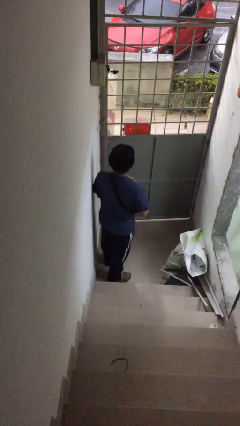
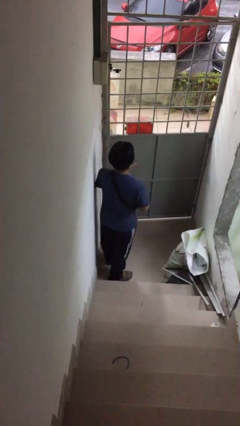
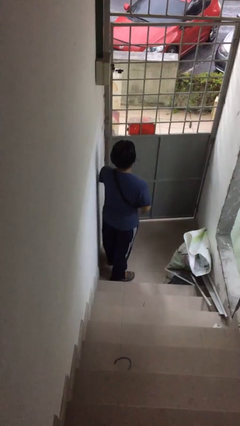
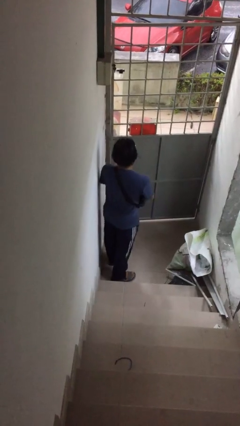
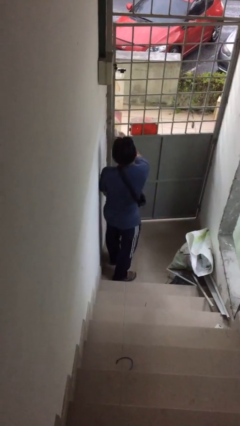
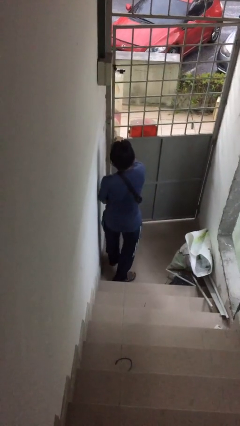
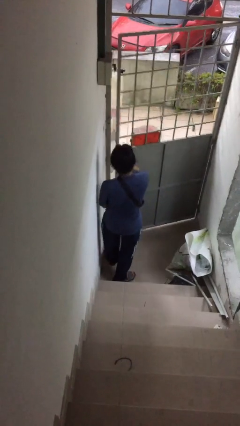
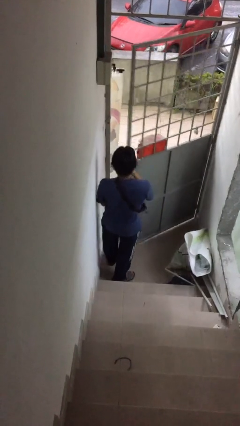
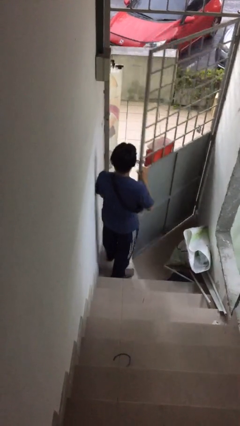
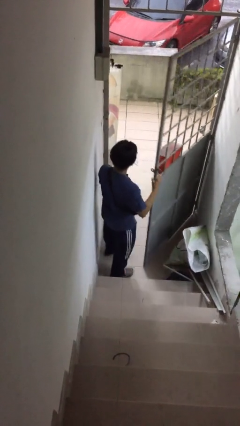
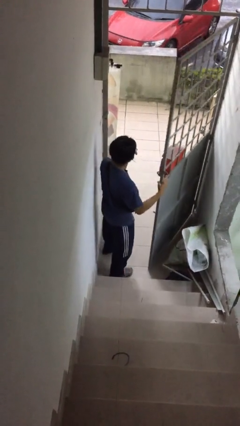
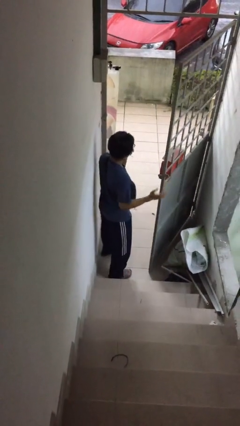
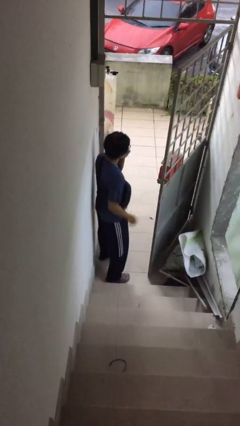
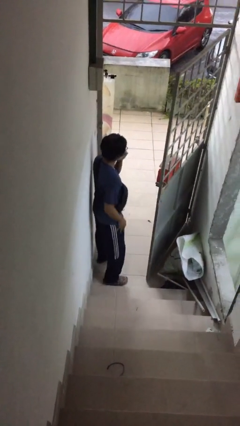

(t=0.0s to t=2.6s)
person opens facility door

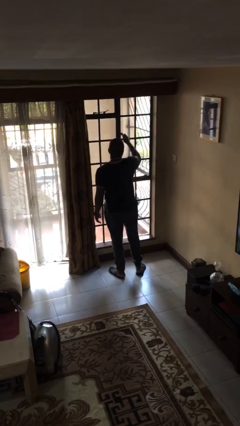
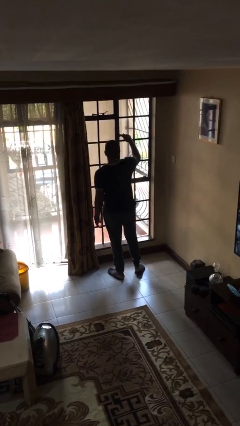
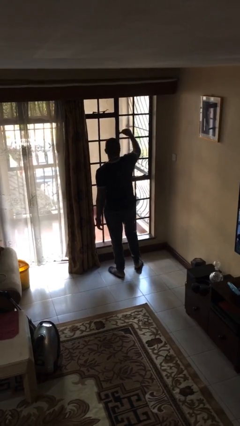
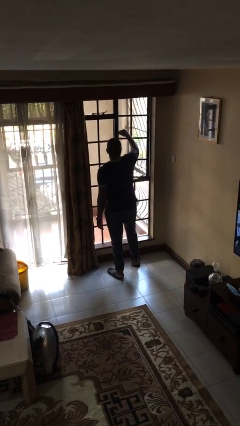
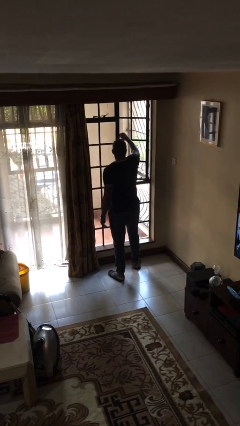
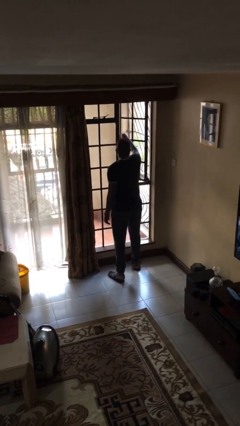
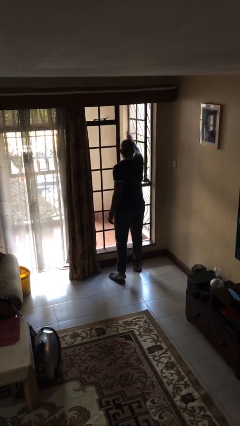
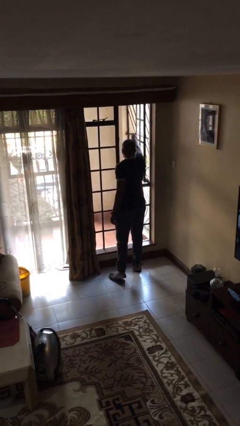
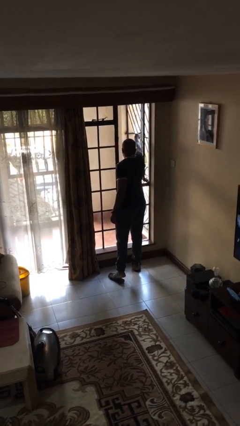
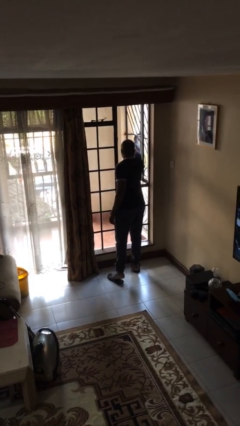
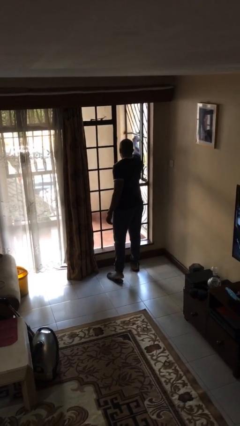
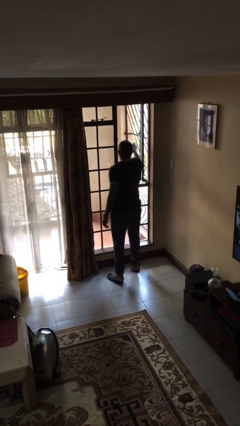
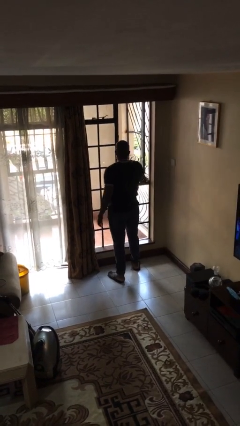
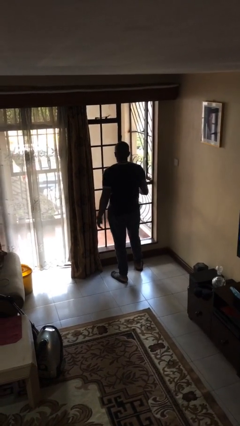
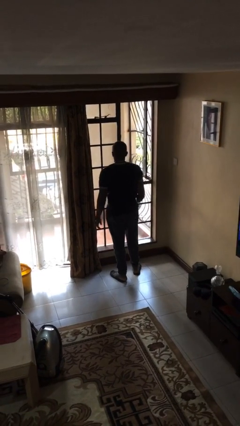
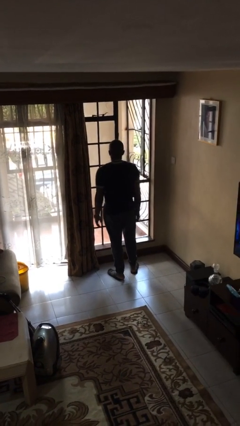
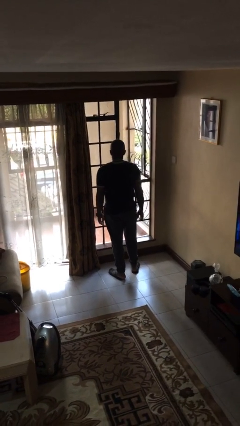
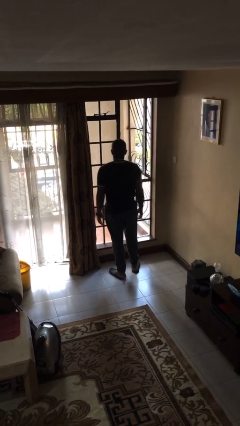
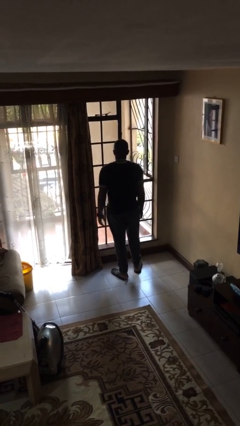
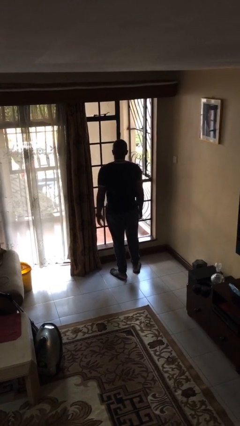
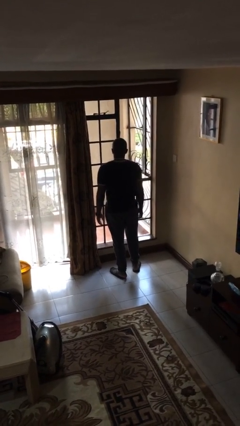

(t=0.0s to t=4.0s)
person opens home window

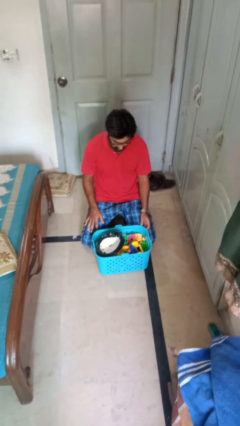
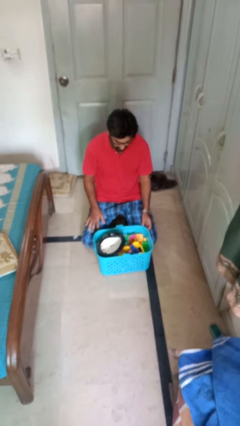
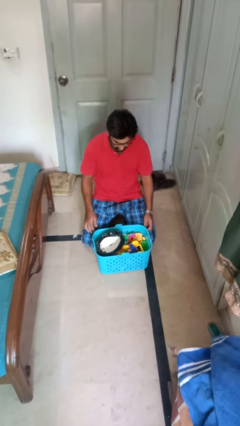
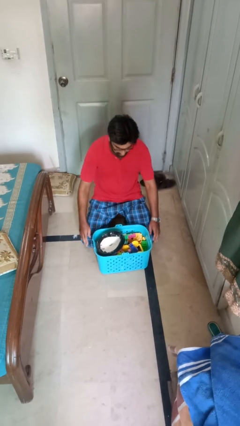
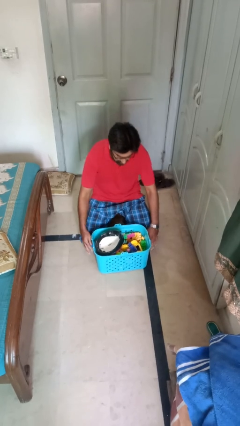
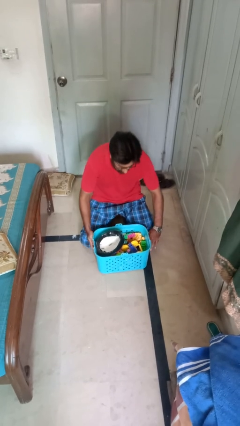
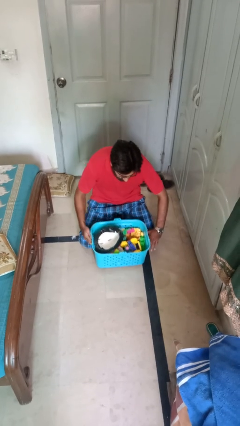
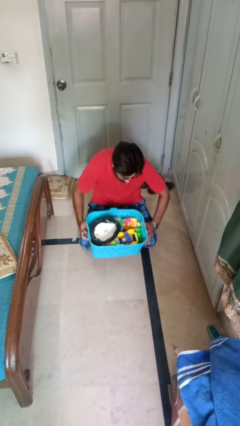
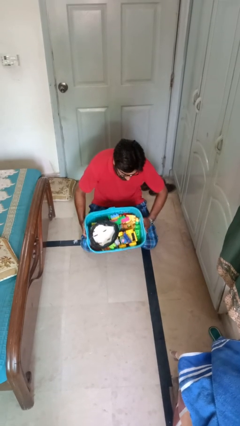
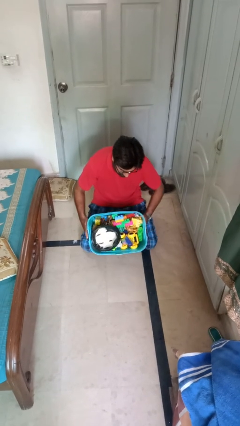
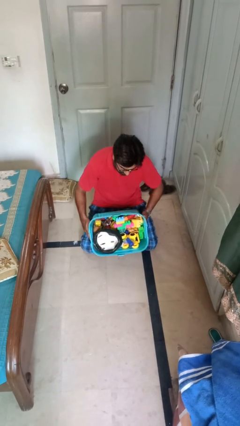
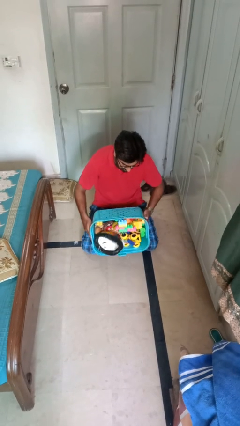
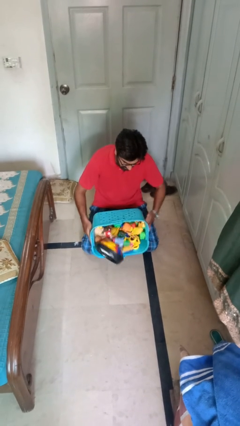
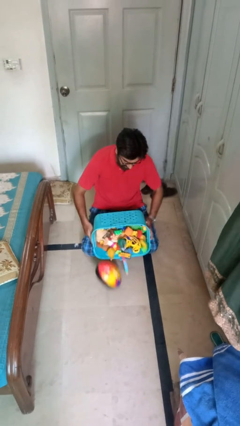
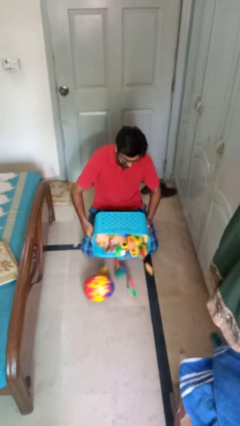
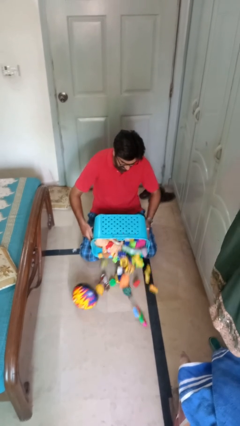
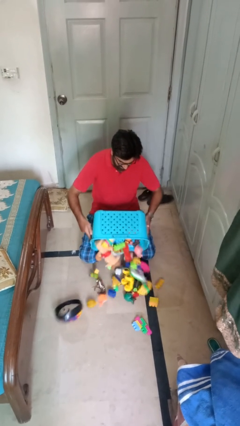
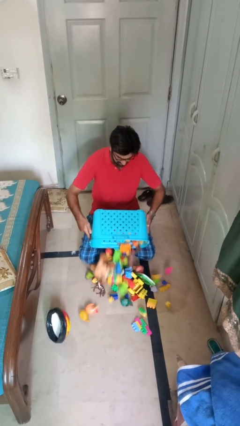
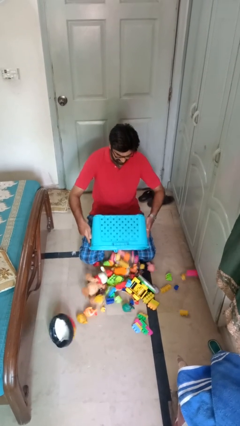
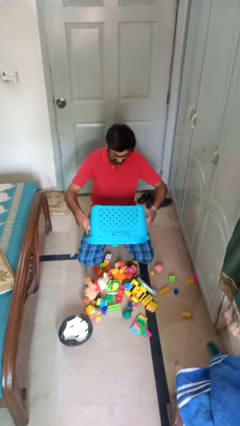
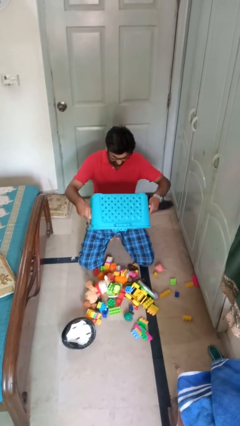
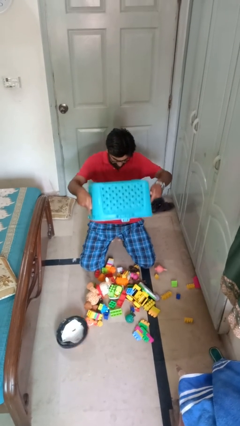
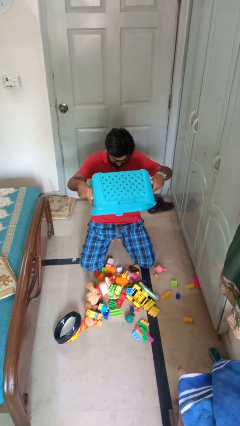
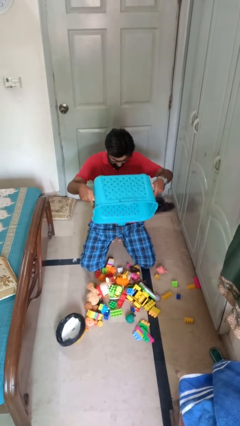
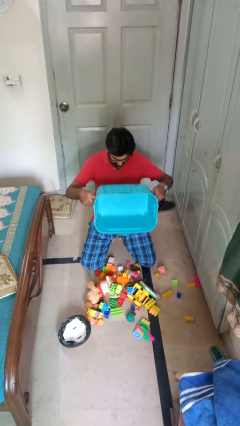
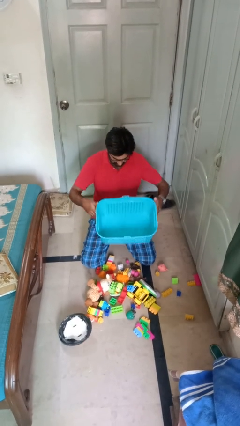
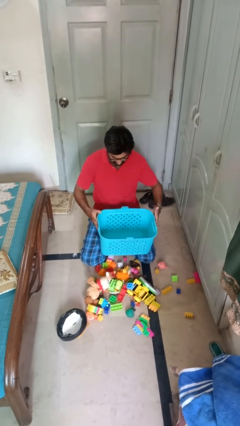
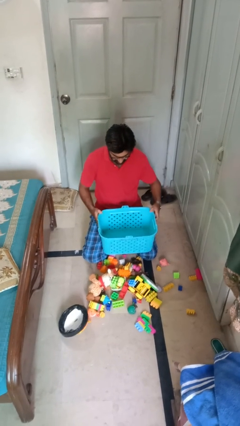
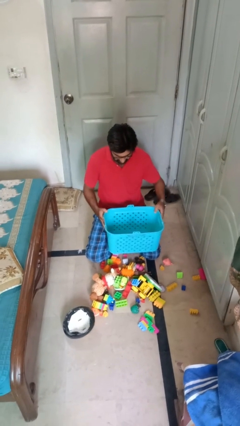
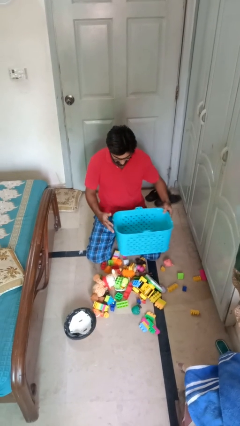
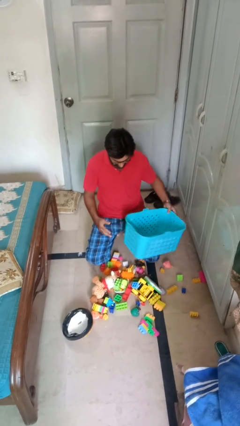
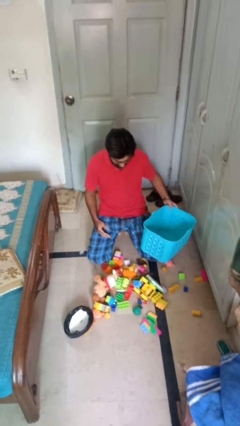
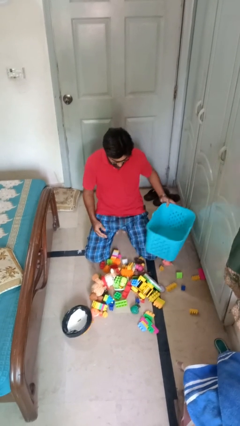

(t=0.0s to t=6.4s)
person unloads box onto floor

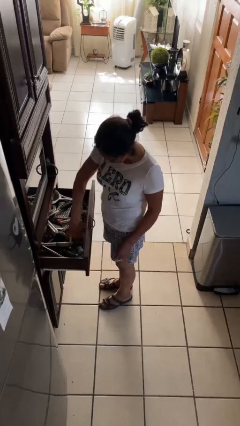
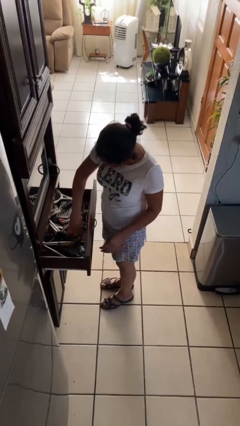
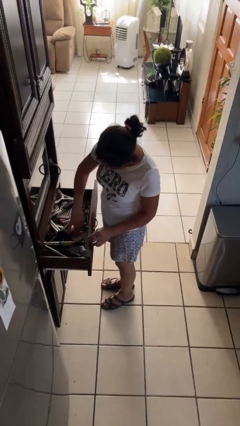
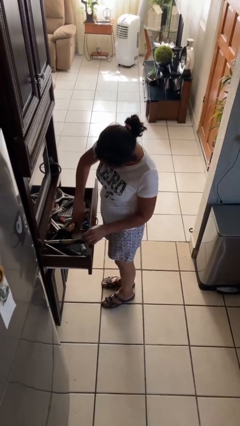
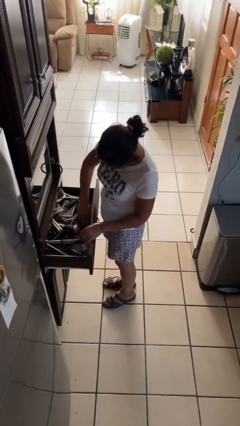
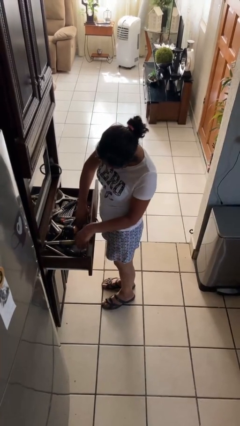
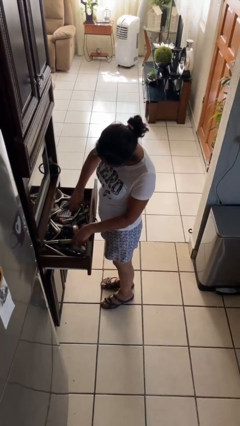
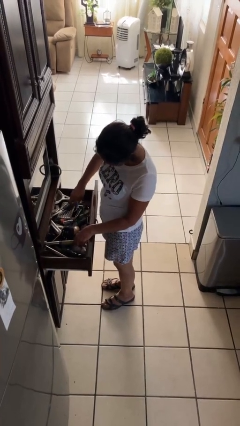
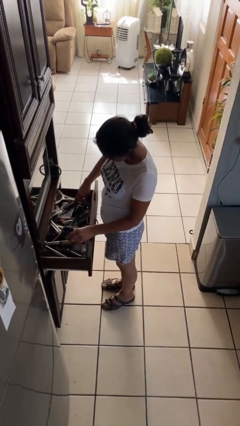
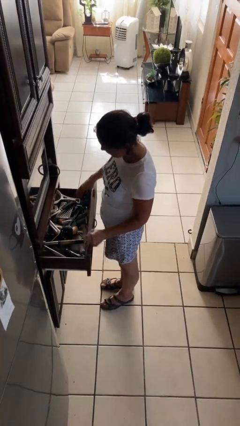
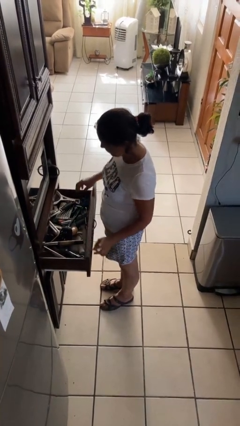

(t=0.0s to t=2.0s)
person searches in kitchen drawer

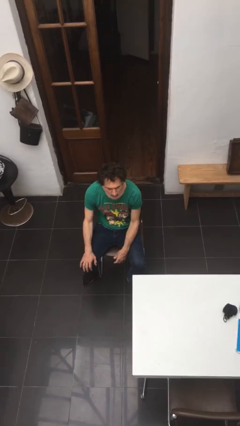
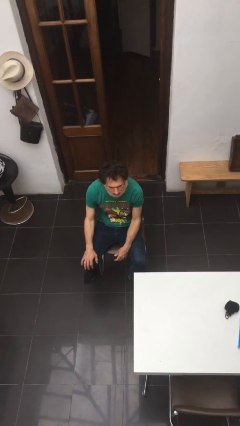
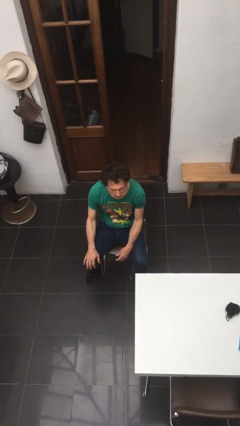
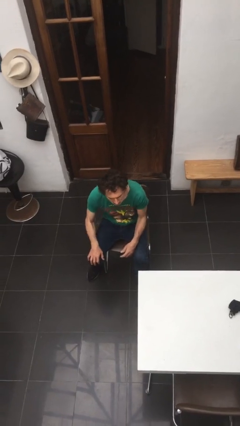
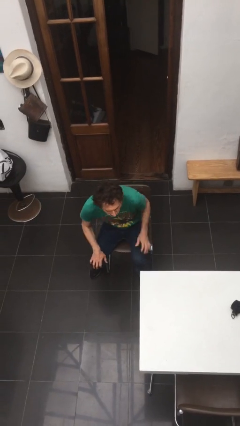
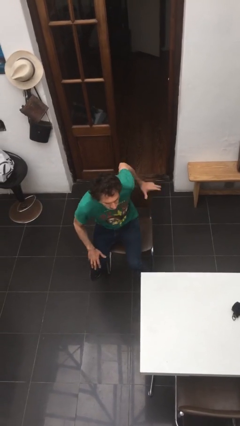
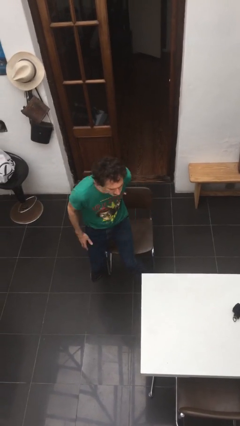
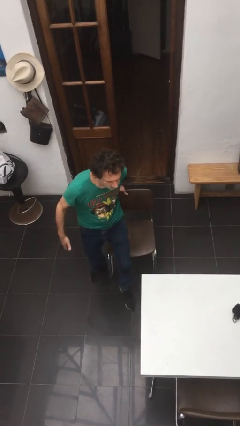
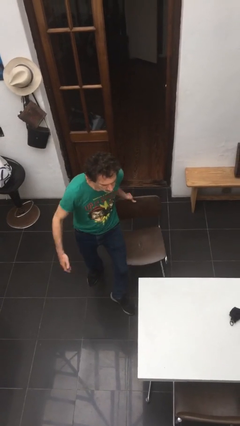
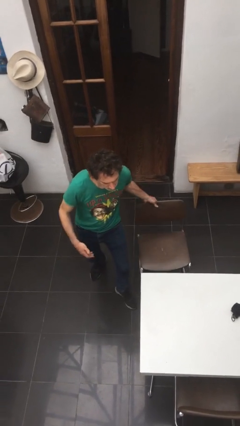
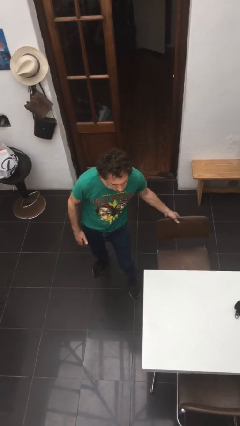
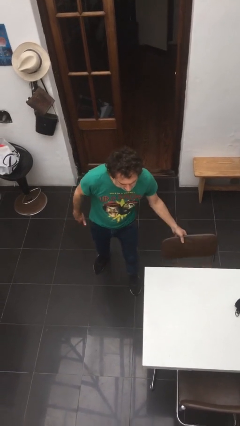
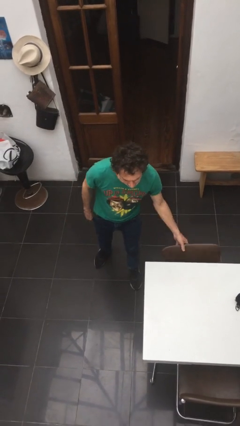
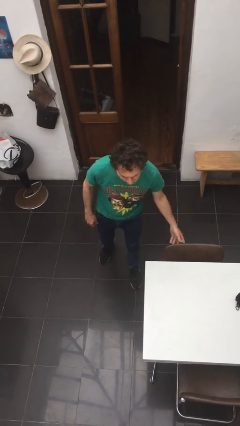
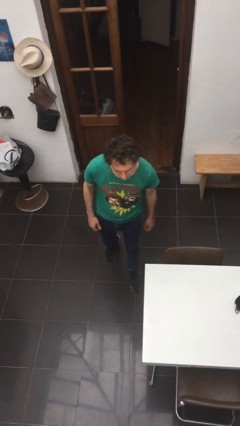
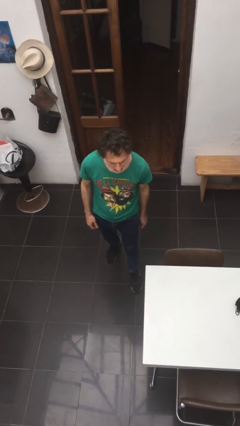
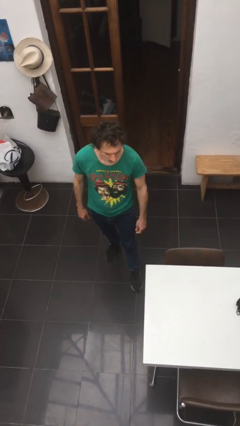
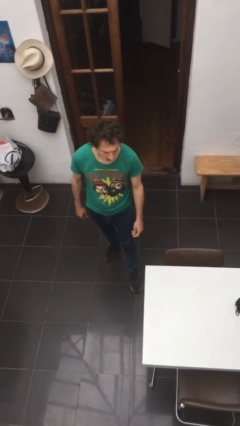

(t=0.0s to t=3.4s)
person stands up
